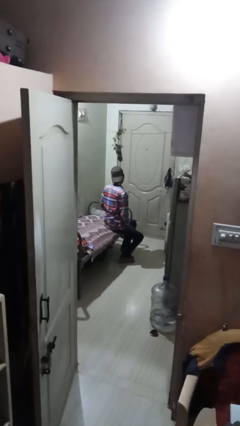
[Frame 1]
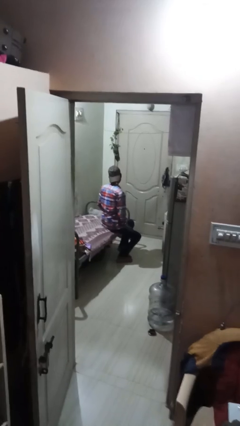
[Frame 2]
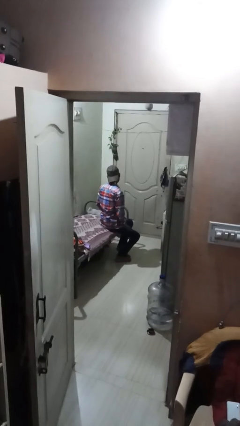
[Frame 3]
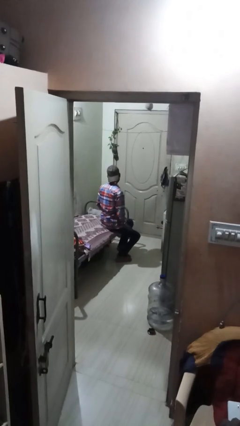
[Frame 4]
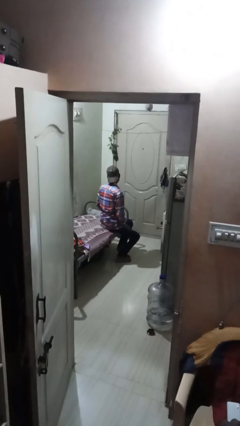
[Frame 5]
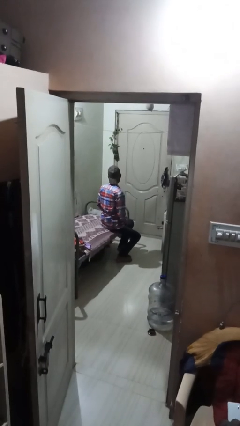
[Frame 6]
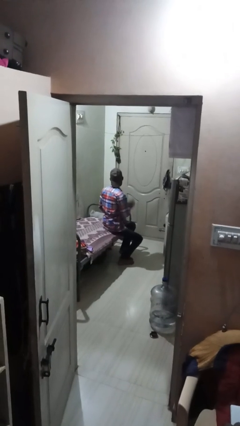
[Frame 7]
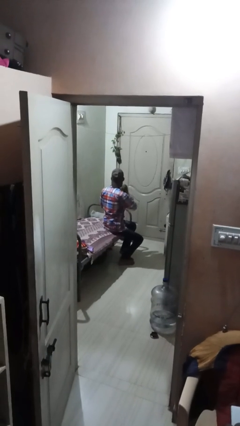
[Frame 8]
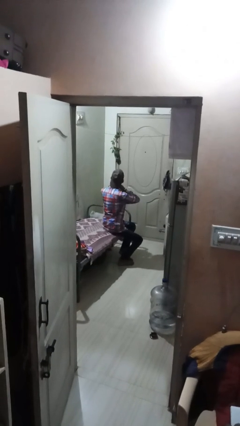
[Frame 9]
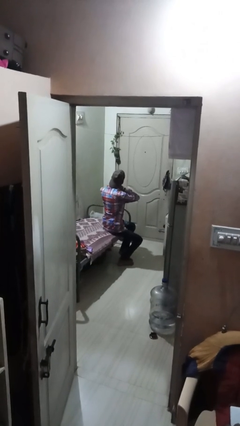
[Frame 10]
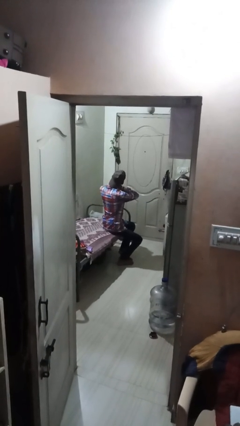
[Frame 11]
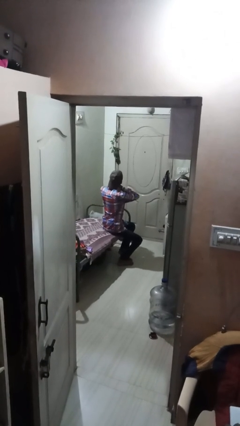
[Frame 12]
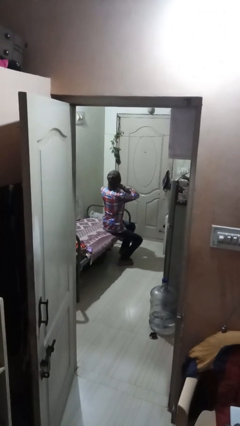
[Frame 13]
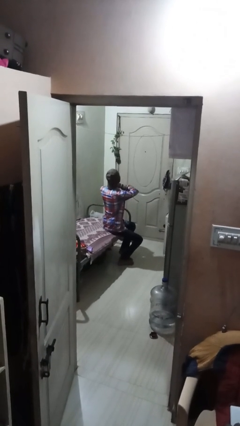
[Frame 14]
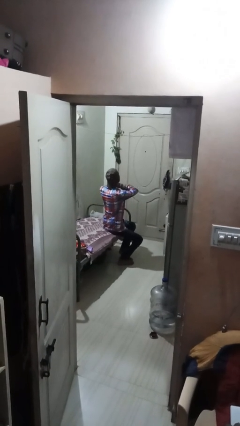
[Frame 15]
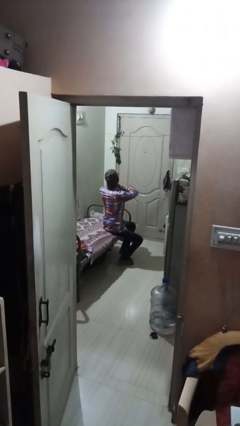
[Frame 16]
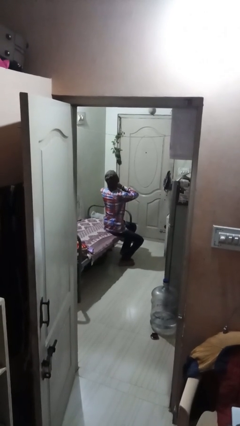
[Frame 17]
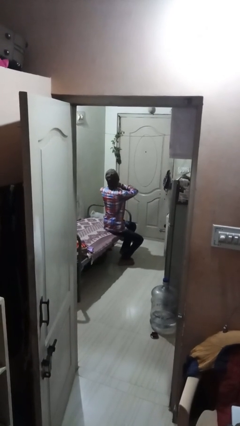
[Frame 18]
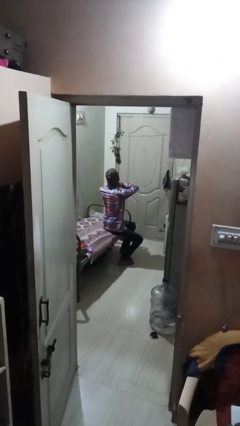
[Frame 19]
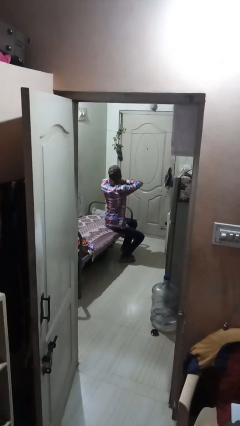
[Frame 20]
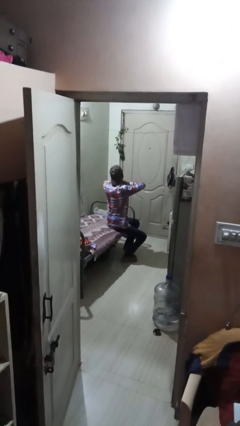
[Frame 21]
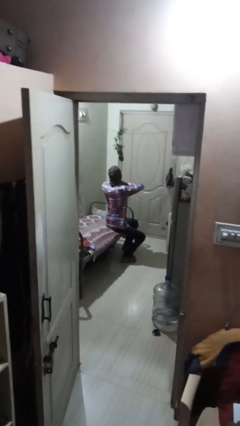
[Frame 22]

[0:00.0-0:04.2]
person rubs neck

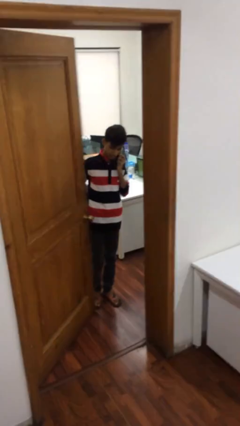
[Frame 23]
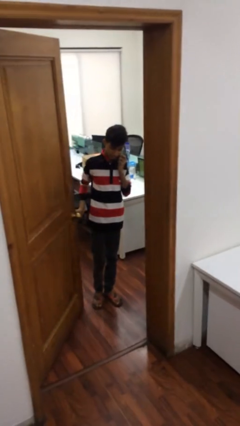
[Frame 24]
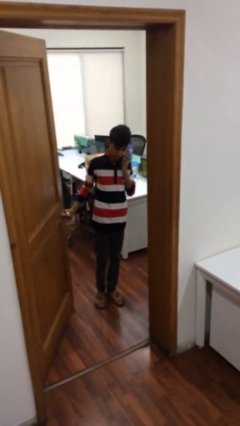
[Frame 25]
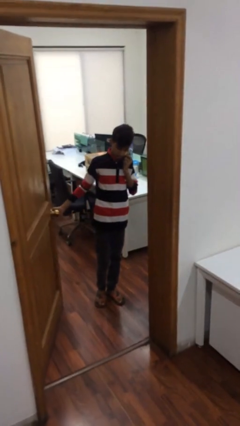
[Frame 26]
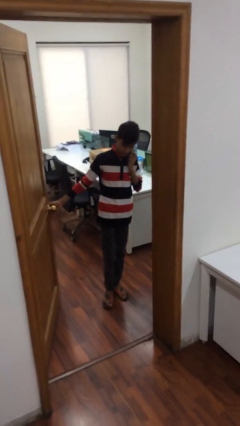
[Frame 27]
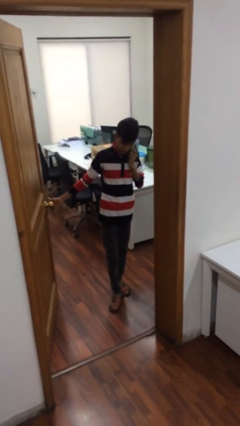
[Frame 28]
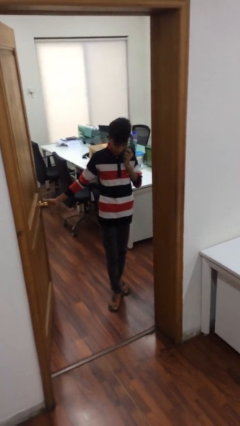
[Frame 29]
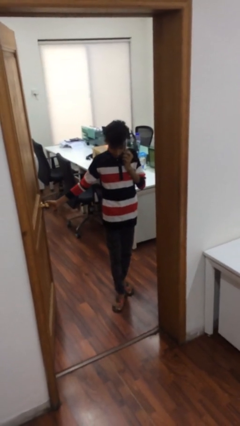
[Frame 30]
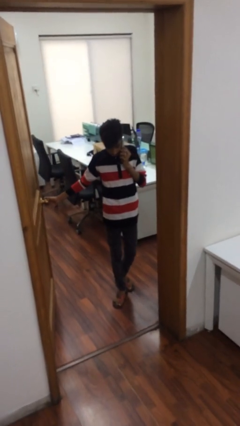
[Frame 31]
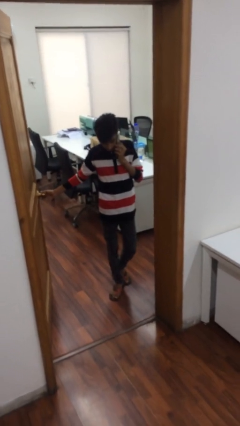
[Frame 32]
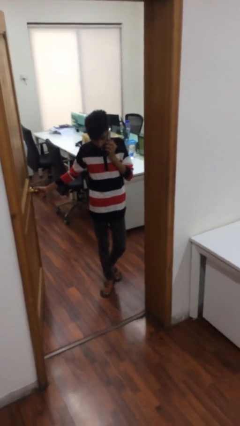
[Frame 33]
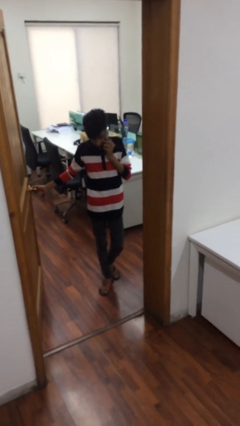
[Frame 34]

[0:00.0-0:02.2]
person opens facility door

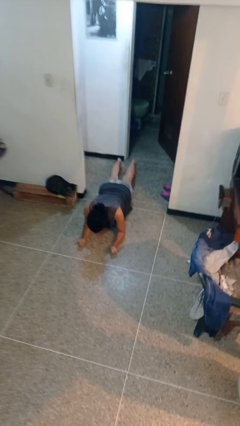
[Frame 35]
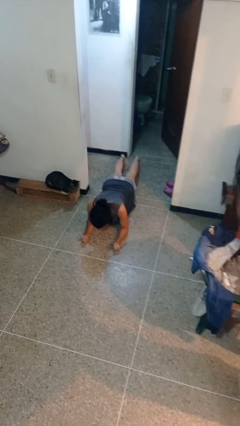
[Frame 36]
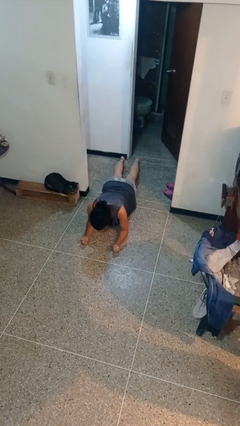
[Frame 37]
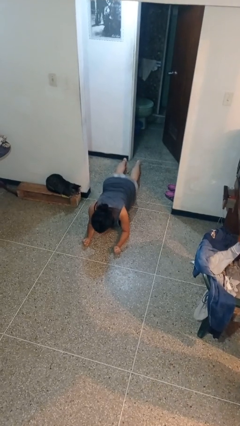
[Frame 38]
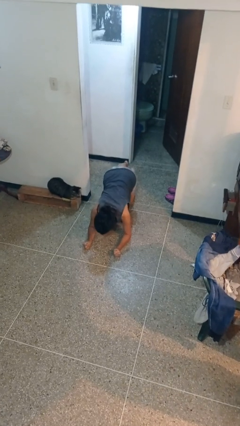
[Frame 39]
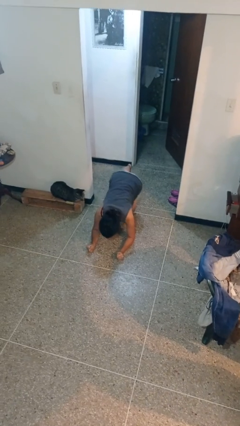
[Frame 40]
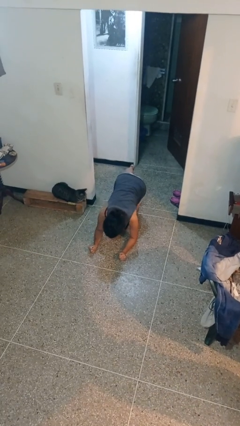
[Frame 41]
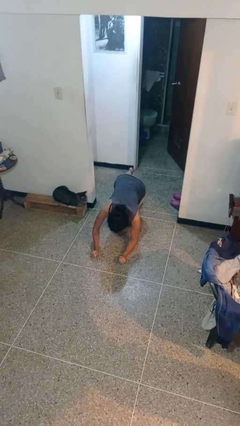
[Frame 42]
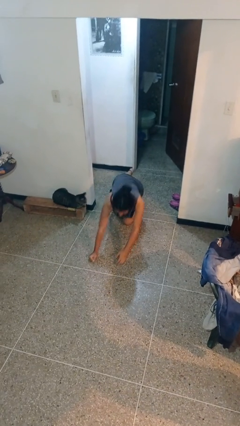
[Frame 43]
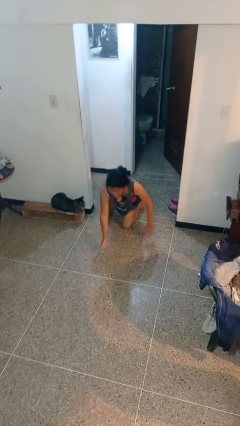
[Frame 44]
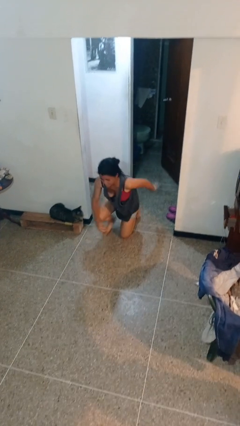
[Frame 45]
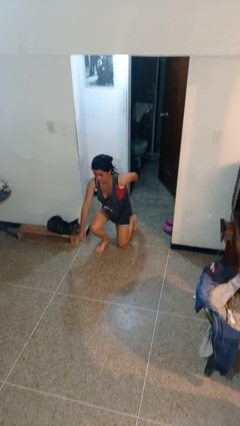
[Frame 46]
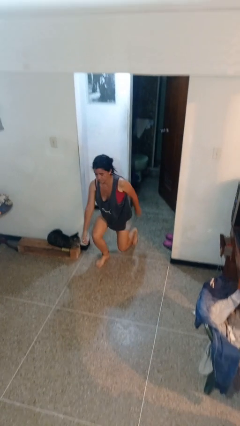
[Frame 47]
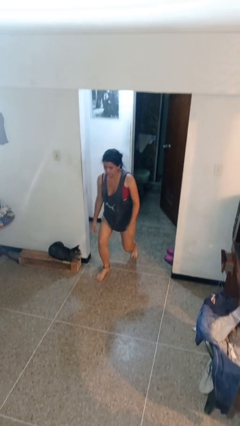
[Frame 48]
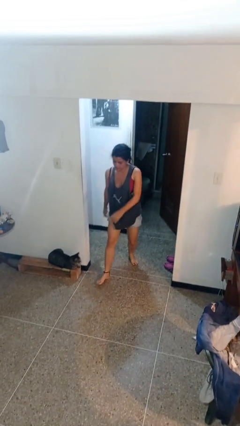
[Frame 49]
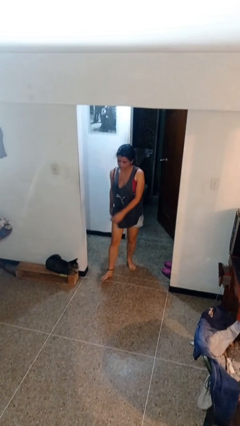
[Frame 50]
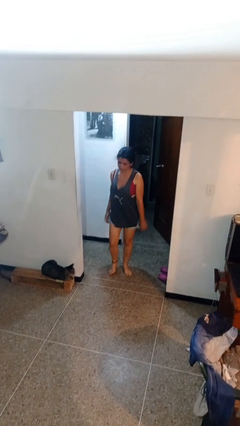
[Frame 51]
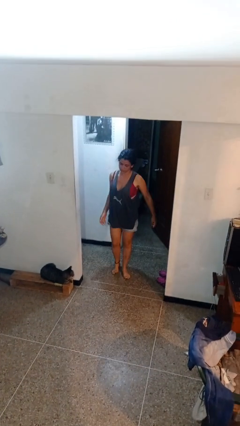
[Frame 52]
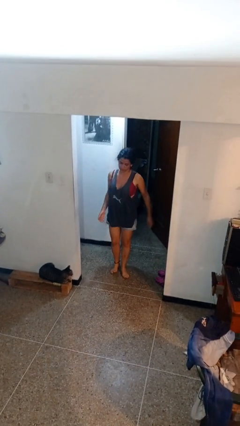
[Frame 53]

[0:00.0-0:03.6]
person stands up from floor

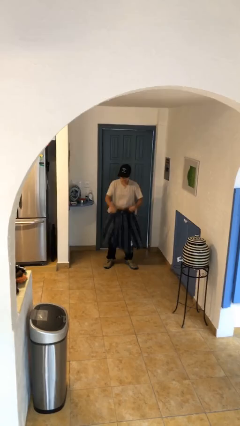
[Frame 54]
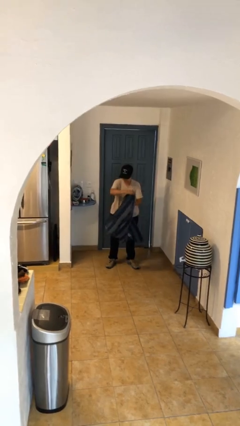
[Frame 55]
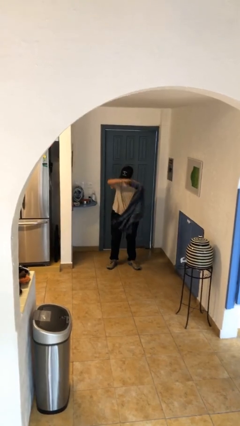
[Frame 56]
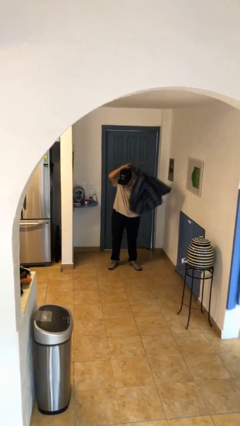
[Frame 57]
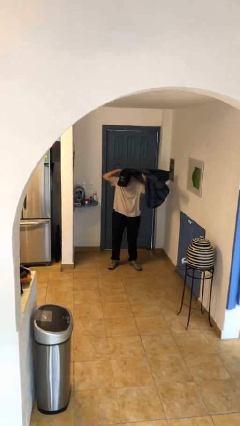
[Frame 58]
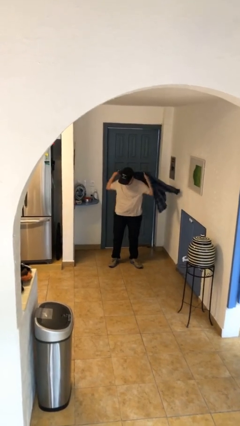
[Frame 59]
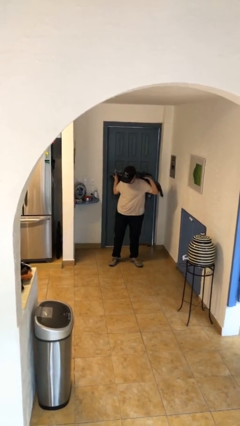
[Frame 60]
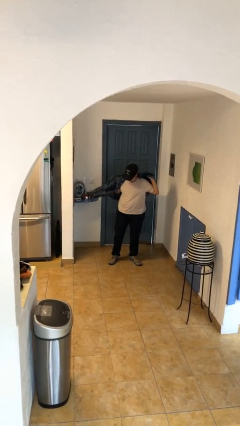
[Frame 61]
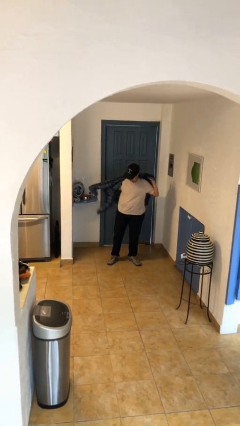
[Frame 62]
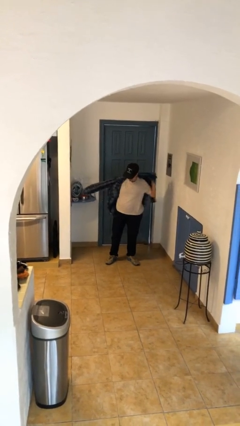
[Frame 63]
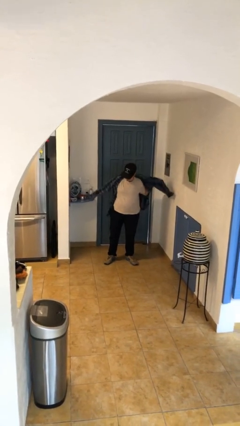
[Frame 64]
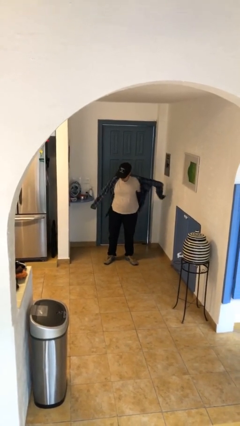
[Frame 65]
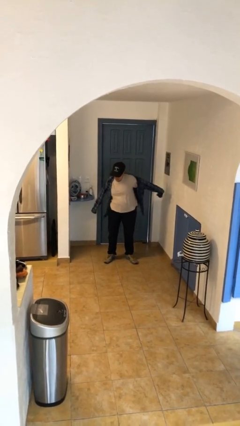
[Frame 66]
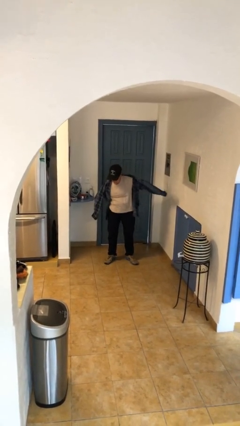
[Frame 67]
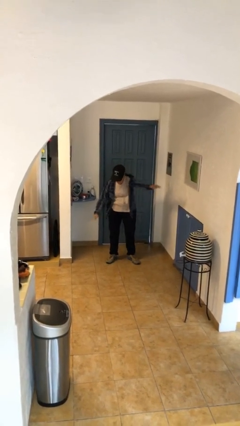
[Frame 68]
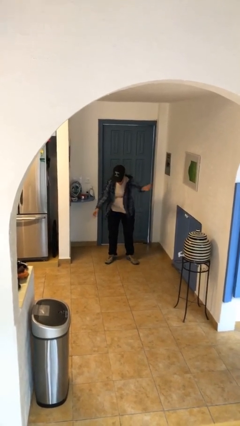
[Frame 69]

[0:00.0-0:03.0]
person puts on shirt

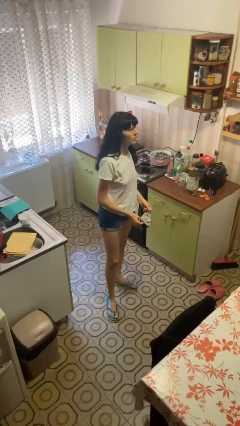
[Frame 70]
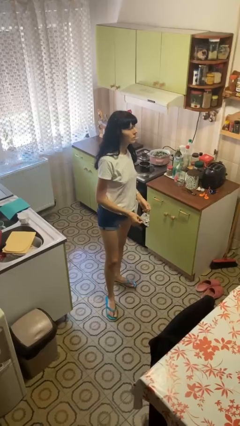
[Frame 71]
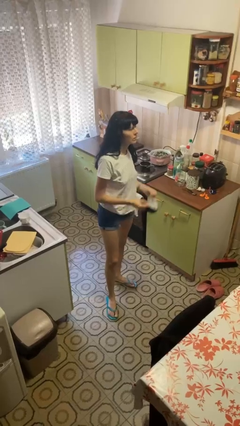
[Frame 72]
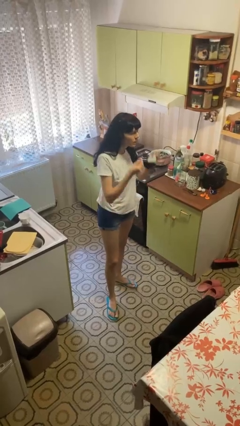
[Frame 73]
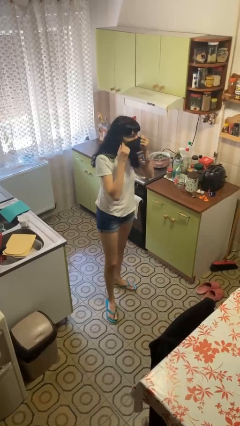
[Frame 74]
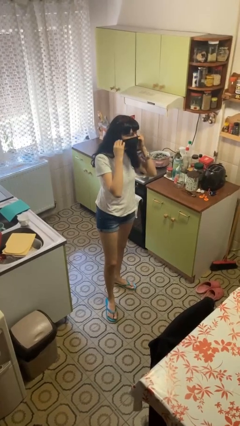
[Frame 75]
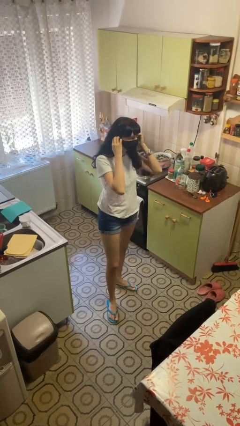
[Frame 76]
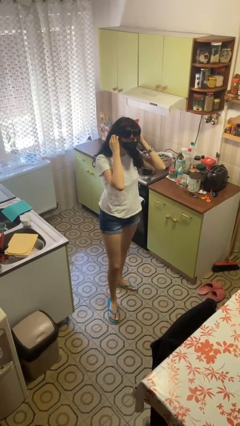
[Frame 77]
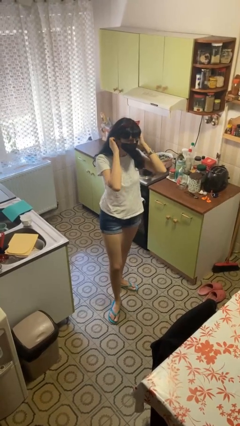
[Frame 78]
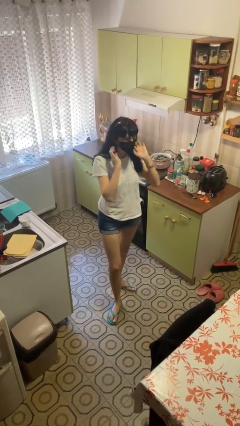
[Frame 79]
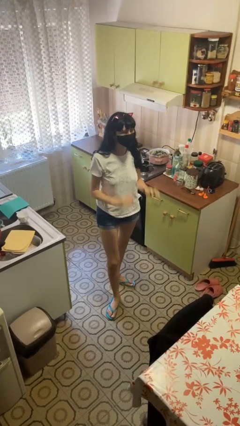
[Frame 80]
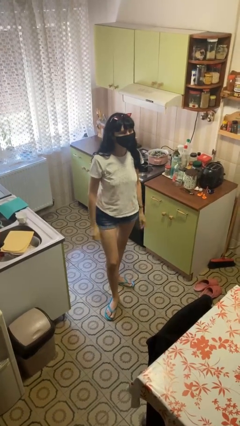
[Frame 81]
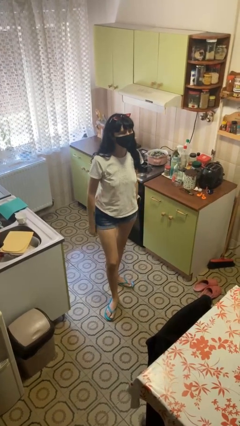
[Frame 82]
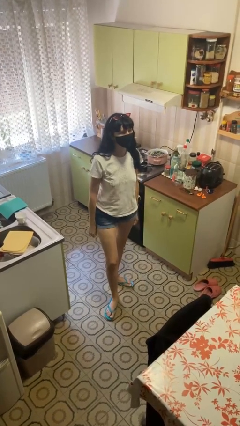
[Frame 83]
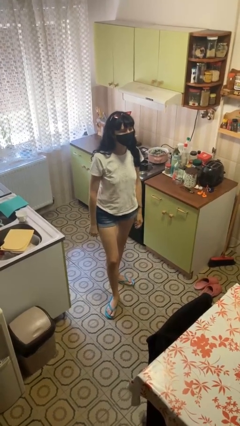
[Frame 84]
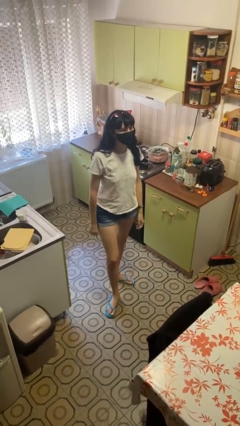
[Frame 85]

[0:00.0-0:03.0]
person puts on facemask

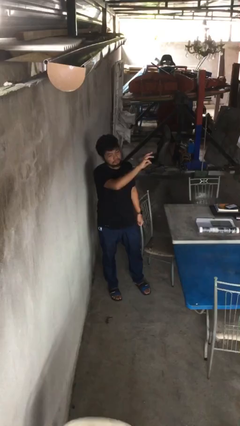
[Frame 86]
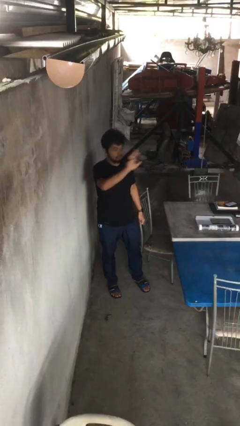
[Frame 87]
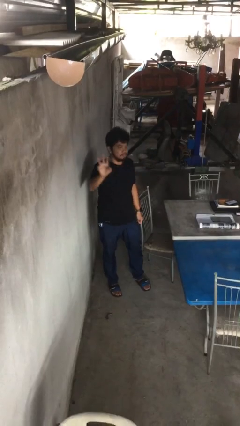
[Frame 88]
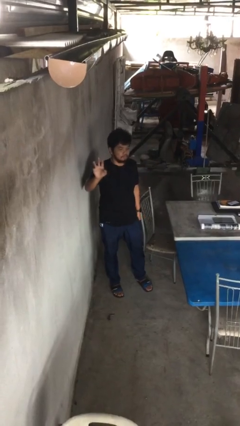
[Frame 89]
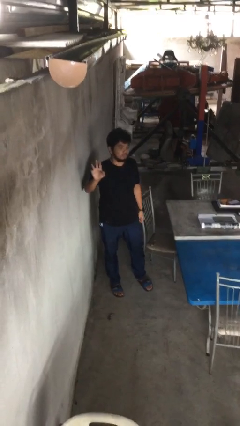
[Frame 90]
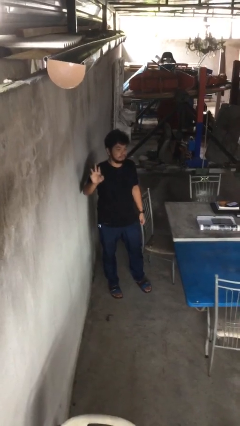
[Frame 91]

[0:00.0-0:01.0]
person gestures swipe right

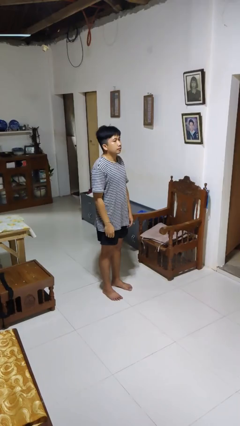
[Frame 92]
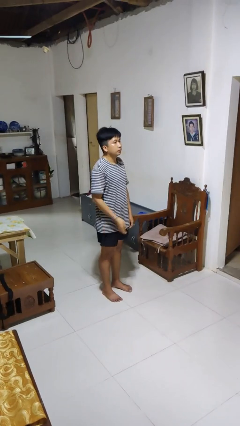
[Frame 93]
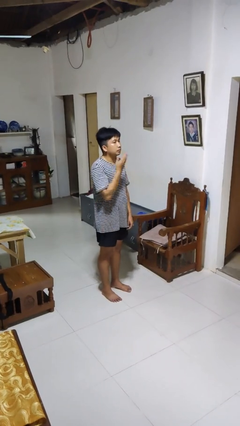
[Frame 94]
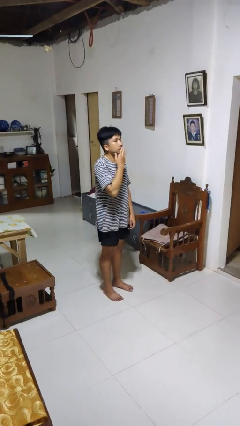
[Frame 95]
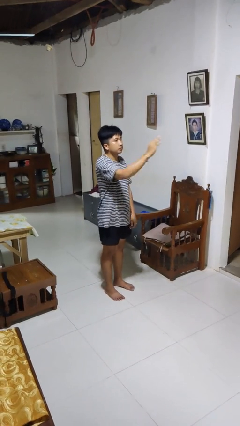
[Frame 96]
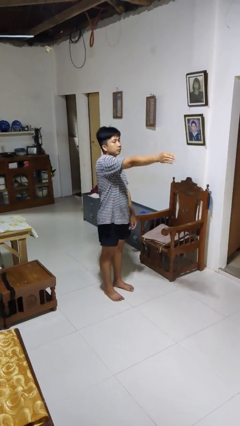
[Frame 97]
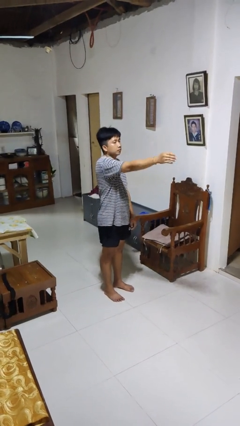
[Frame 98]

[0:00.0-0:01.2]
person gestures blow kiss
